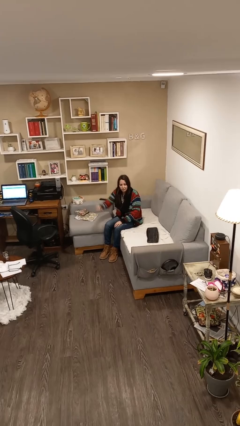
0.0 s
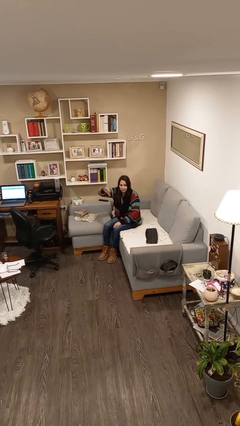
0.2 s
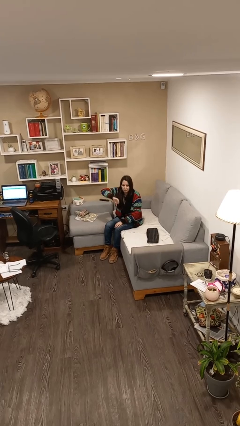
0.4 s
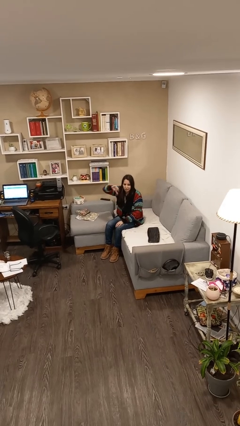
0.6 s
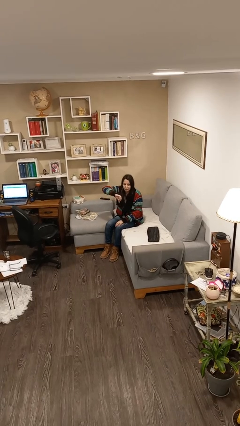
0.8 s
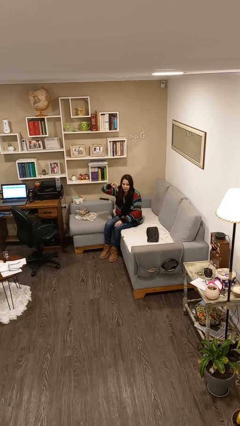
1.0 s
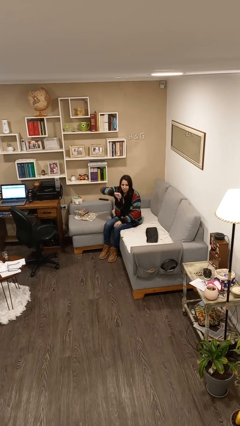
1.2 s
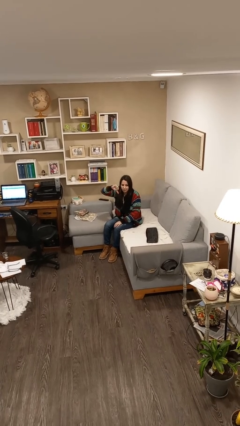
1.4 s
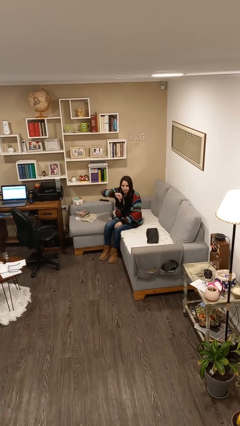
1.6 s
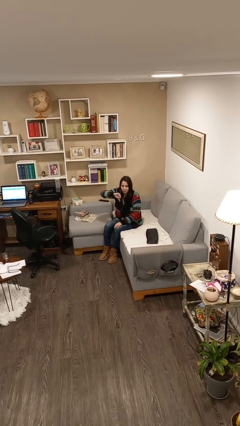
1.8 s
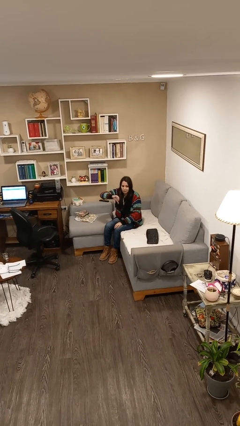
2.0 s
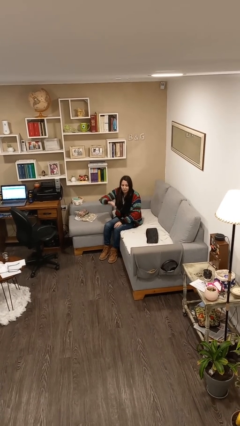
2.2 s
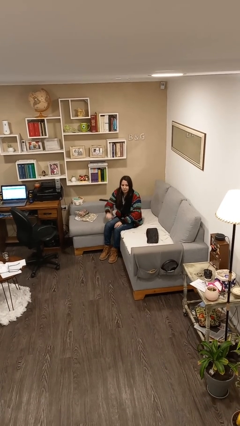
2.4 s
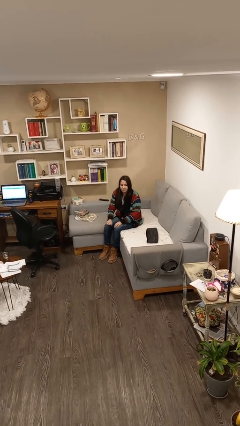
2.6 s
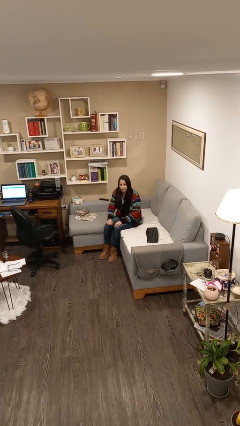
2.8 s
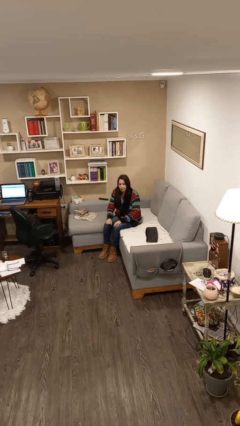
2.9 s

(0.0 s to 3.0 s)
person gestures thumbs down

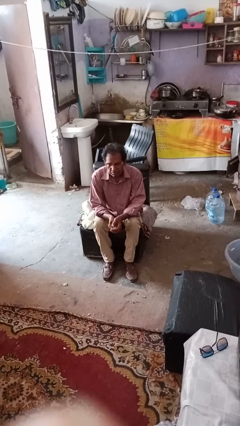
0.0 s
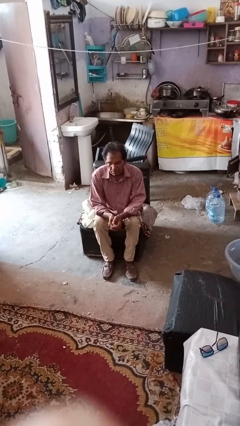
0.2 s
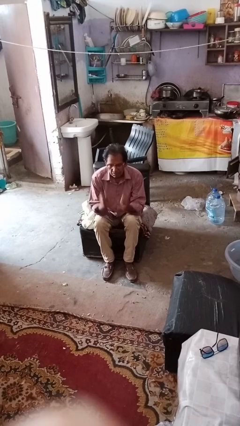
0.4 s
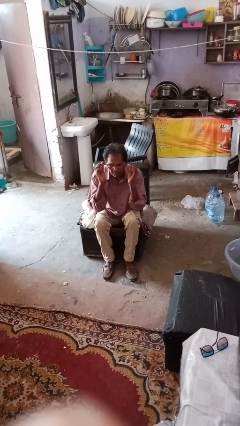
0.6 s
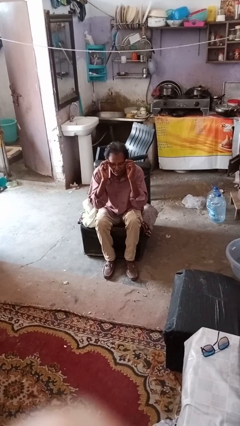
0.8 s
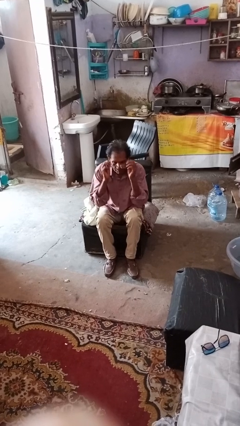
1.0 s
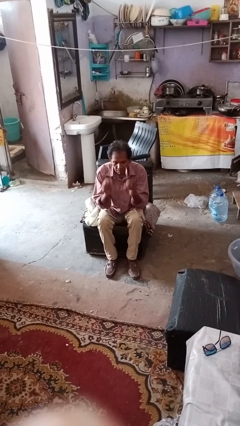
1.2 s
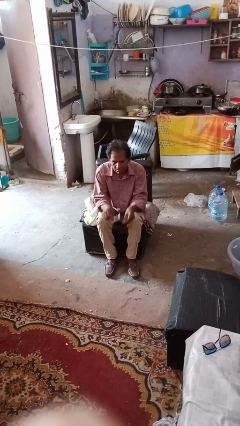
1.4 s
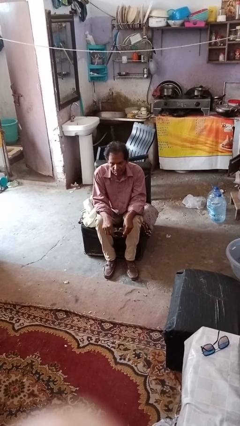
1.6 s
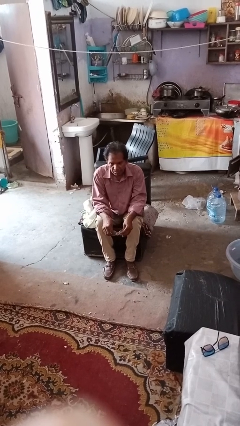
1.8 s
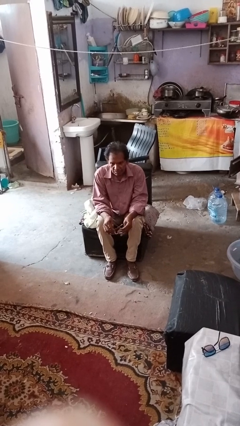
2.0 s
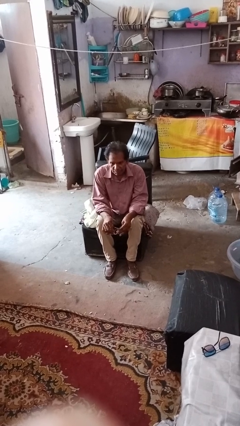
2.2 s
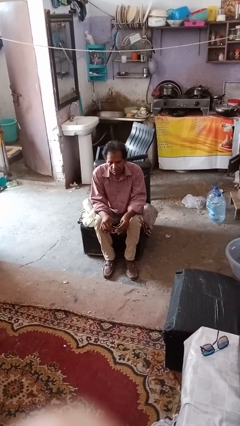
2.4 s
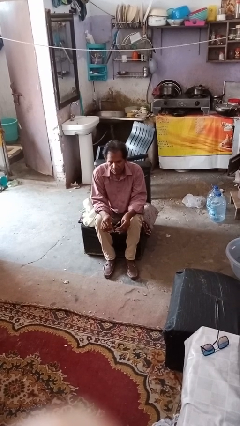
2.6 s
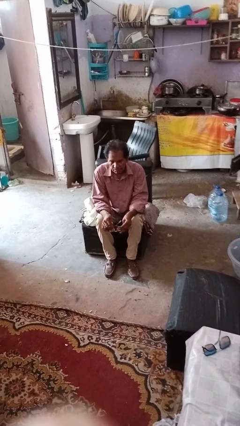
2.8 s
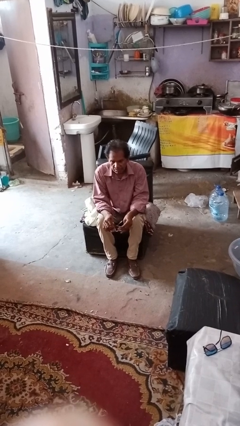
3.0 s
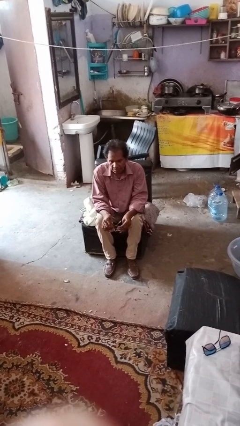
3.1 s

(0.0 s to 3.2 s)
person takes off glasses

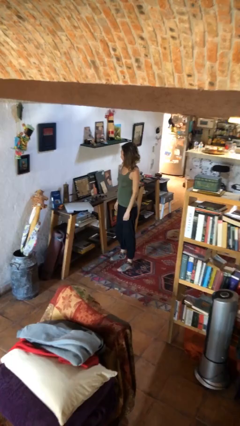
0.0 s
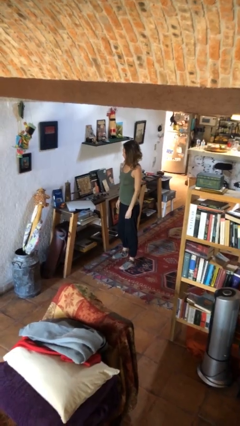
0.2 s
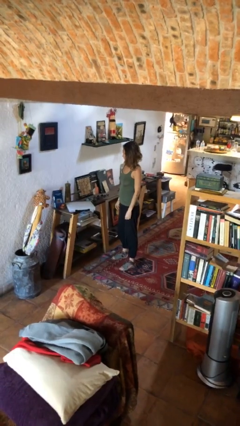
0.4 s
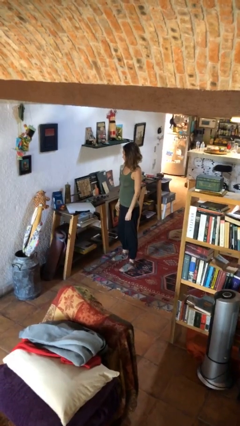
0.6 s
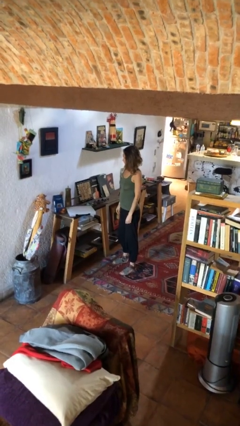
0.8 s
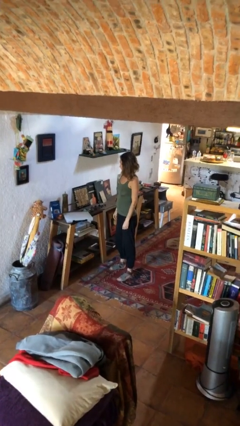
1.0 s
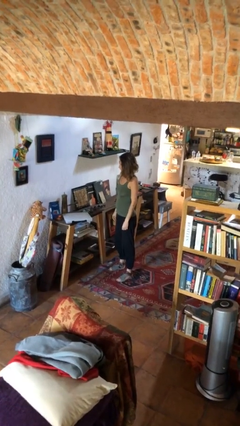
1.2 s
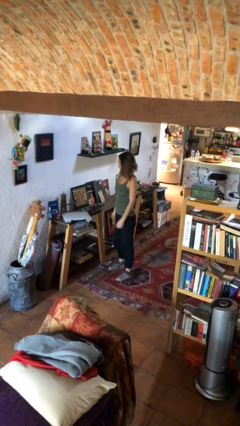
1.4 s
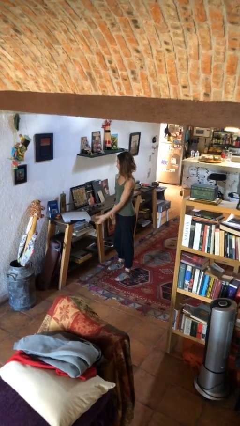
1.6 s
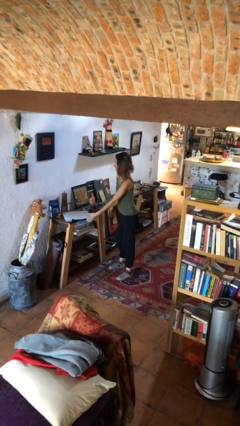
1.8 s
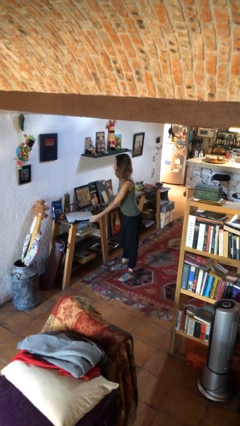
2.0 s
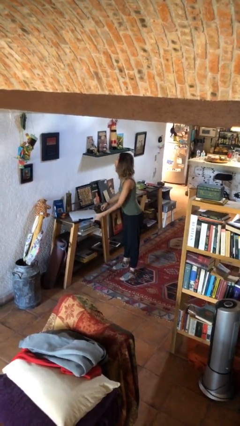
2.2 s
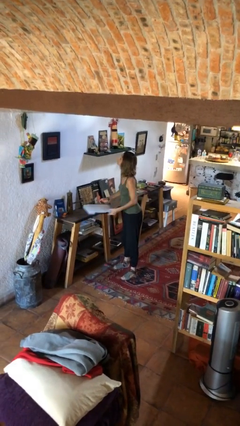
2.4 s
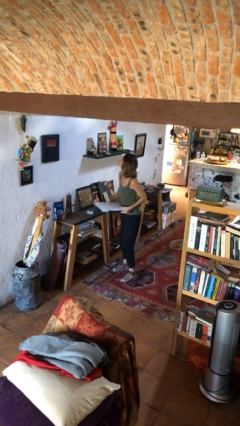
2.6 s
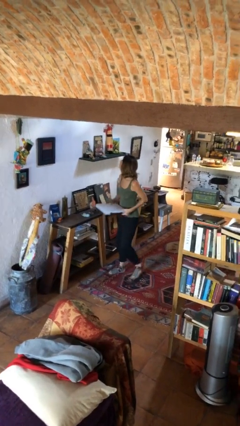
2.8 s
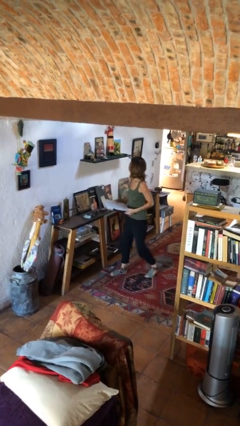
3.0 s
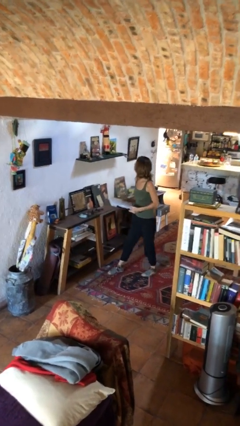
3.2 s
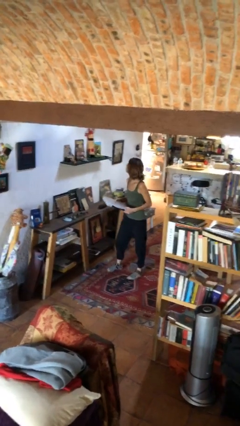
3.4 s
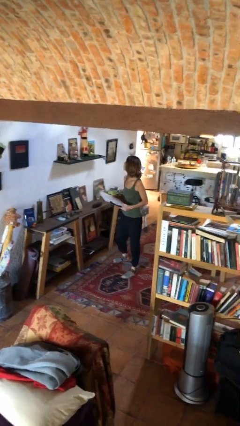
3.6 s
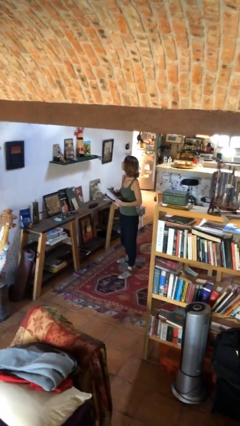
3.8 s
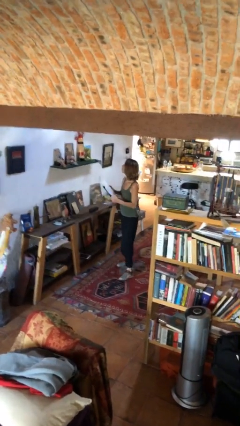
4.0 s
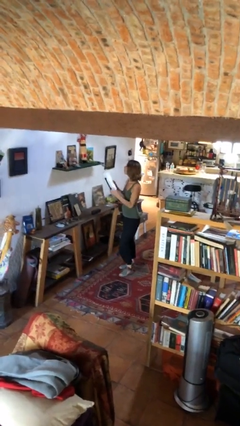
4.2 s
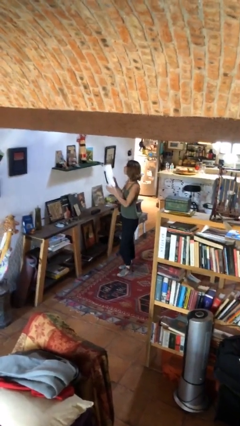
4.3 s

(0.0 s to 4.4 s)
person picks up object from table

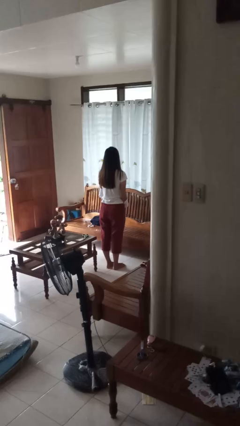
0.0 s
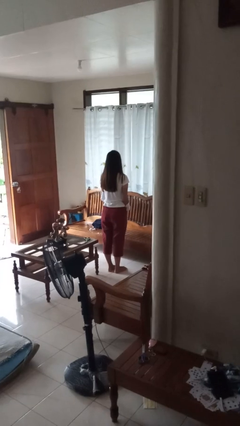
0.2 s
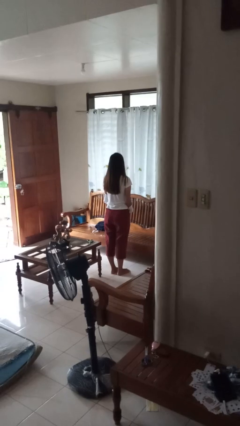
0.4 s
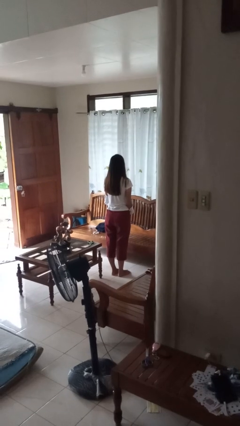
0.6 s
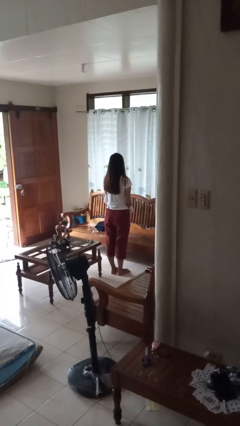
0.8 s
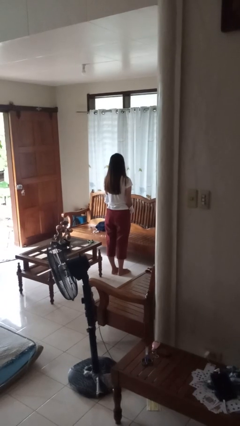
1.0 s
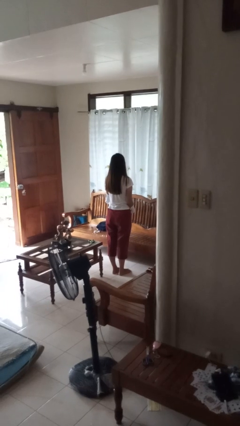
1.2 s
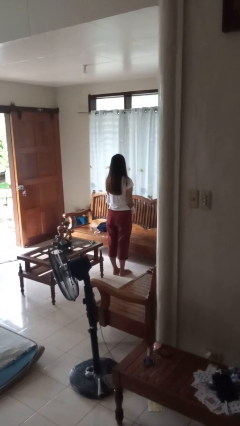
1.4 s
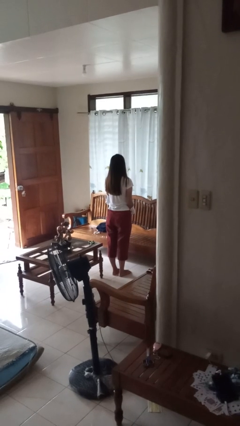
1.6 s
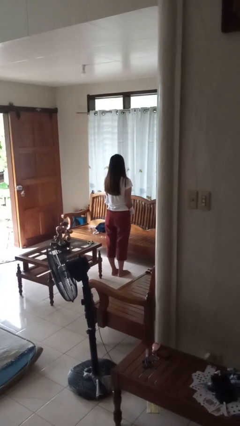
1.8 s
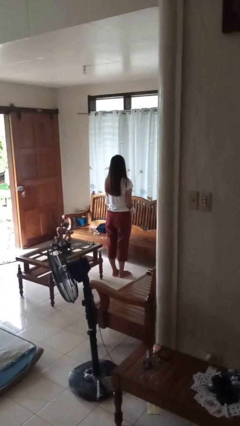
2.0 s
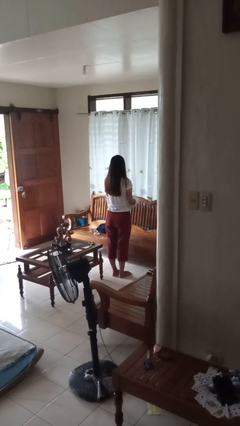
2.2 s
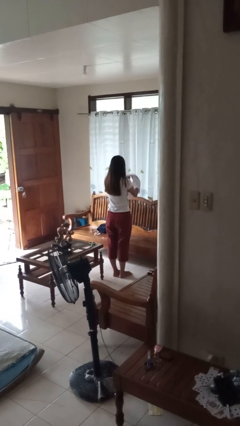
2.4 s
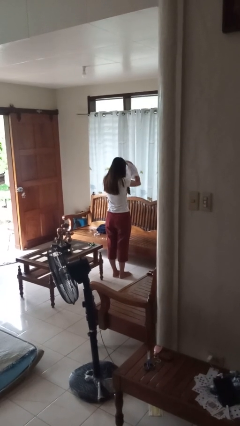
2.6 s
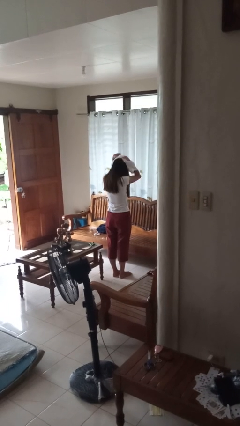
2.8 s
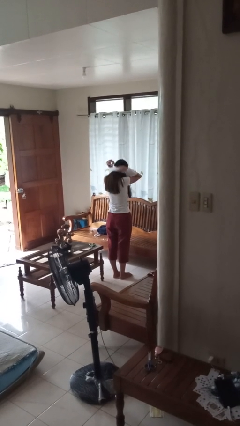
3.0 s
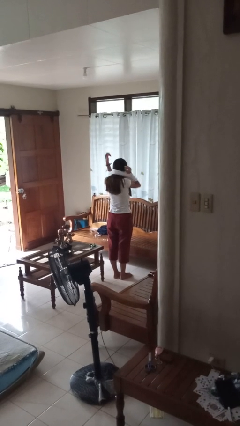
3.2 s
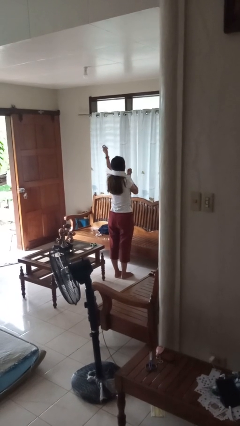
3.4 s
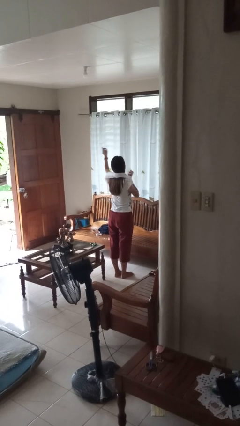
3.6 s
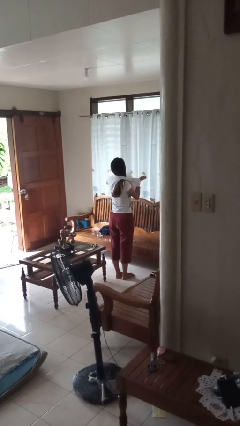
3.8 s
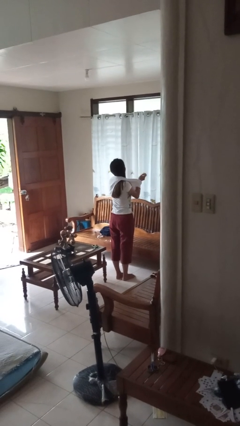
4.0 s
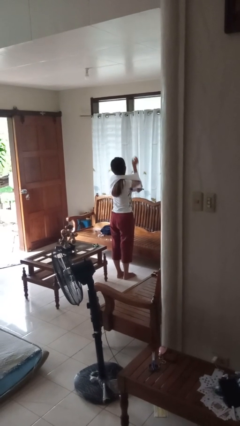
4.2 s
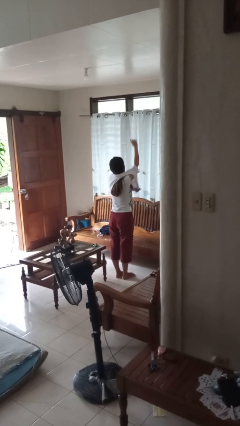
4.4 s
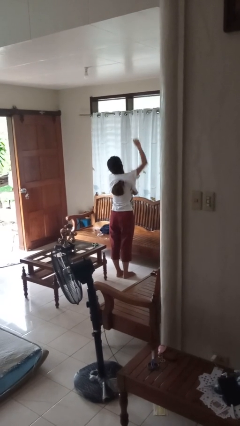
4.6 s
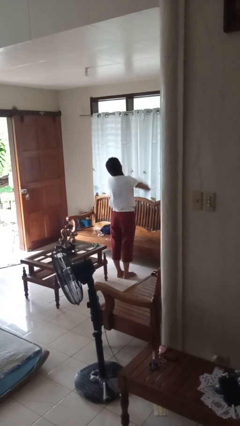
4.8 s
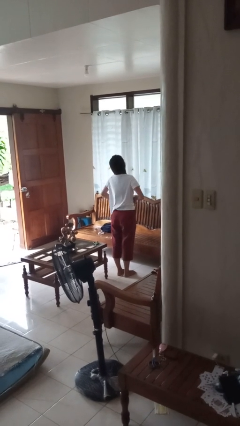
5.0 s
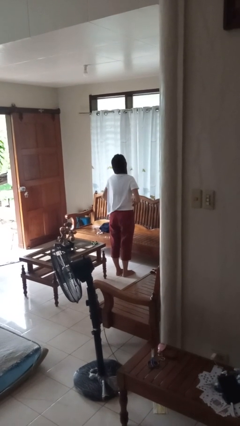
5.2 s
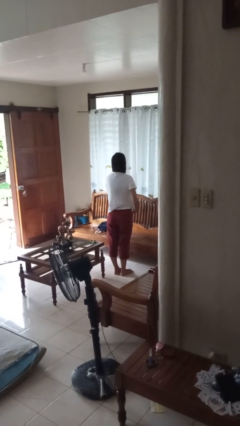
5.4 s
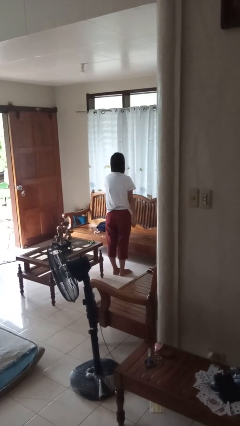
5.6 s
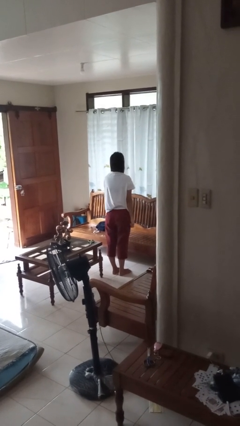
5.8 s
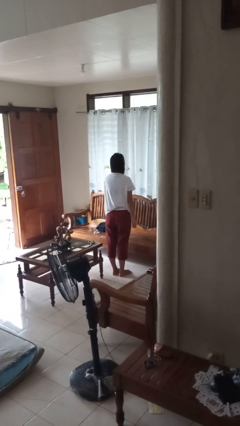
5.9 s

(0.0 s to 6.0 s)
person puts on shirt

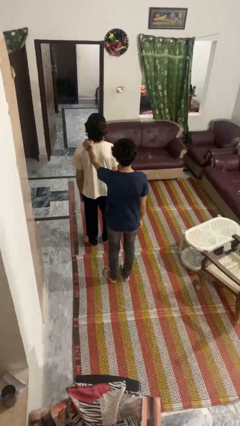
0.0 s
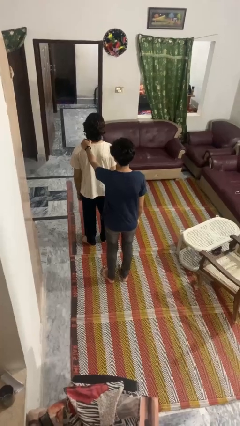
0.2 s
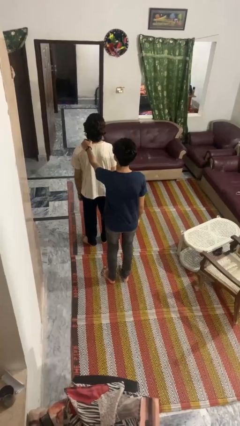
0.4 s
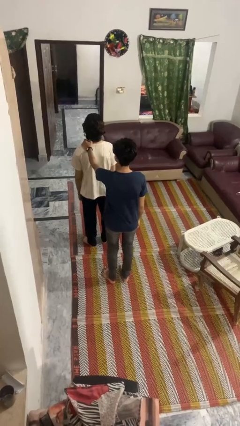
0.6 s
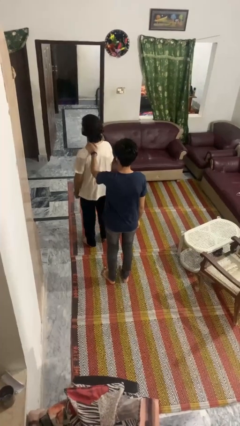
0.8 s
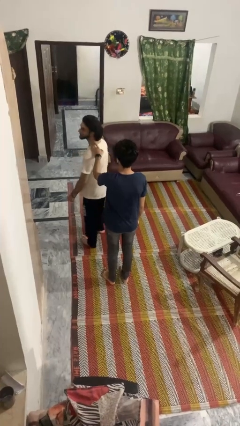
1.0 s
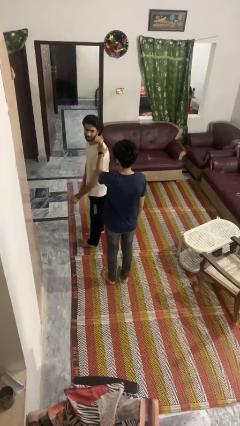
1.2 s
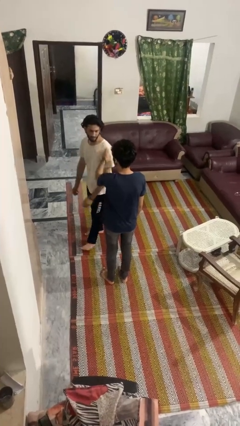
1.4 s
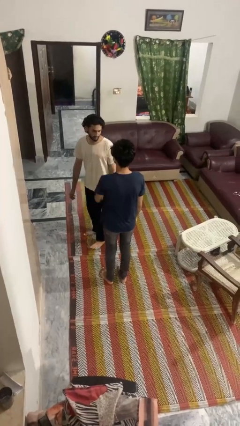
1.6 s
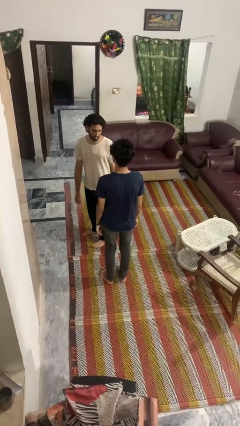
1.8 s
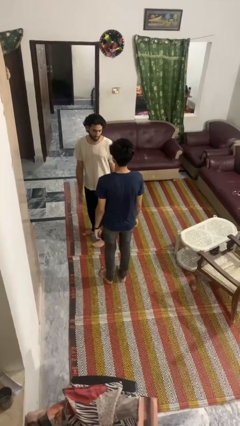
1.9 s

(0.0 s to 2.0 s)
person spins person around
